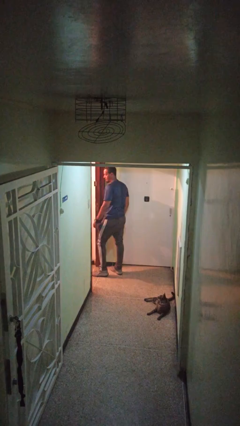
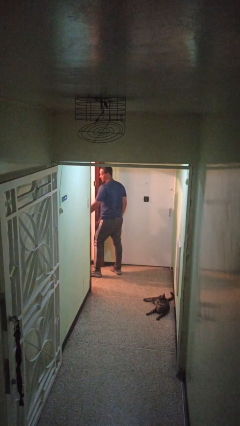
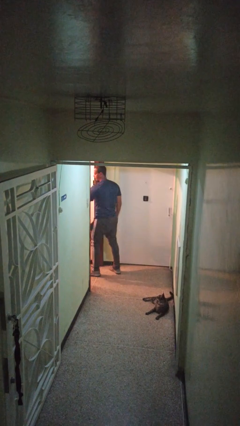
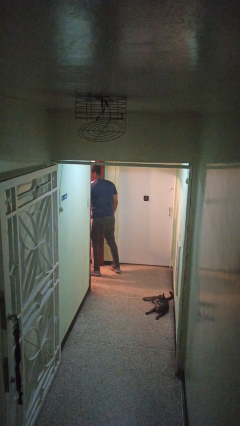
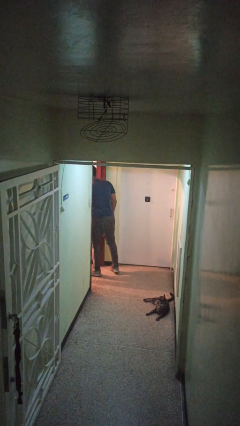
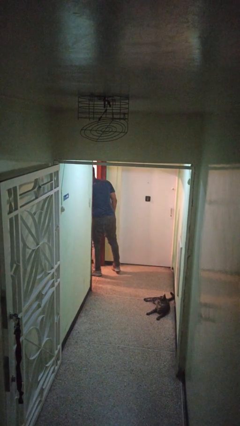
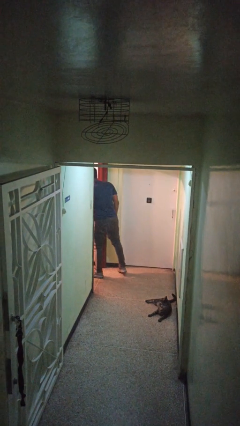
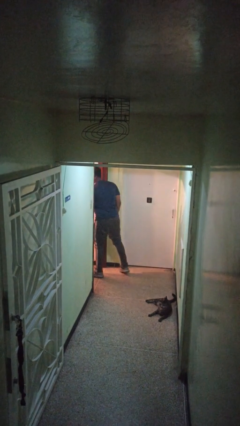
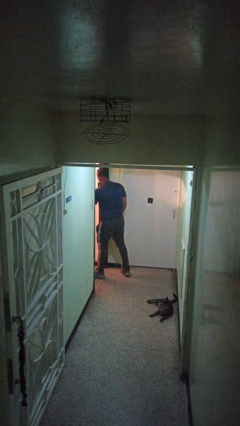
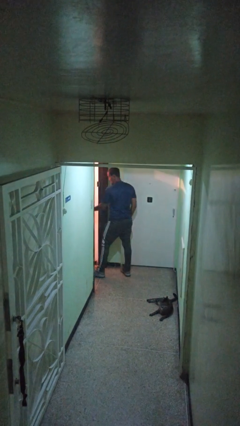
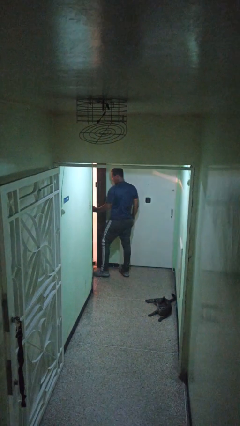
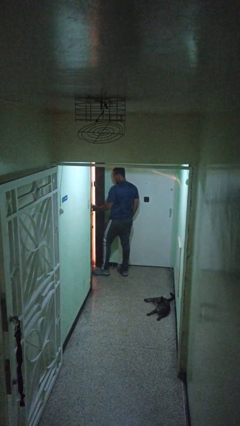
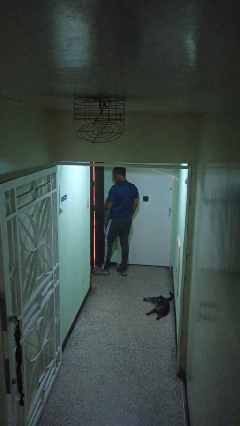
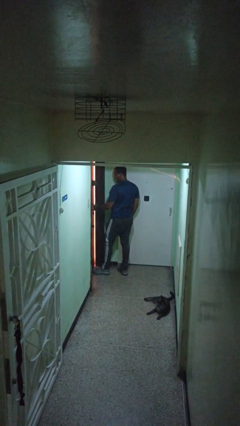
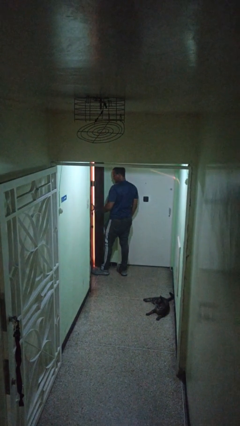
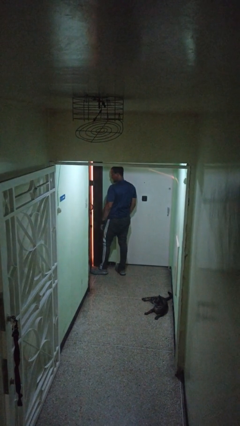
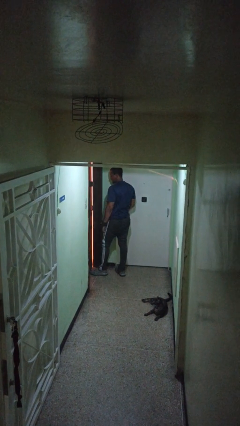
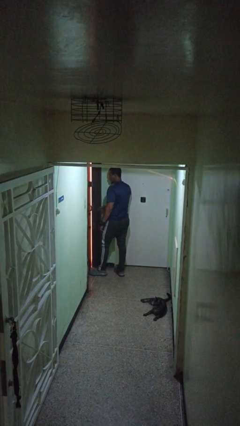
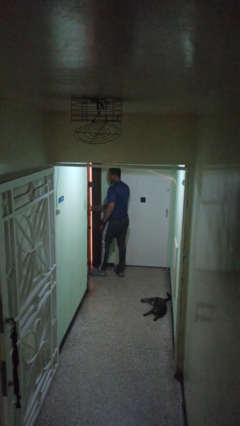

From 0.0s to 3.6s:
person closes facility door

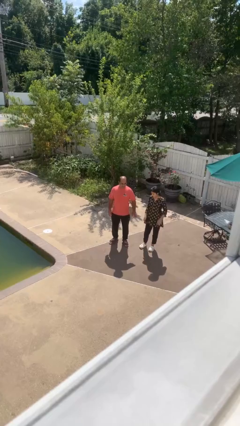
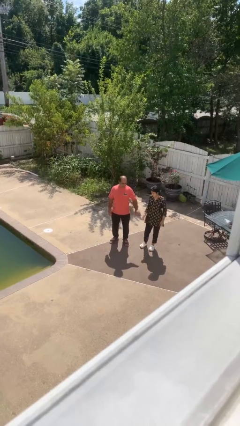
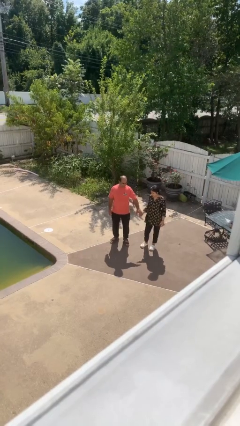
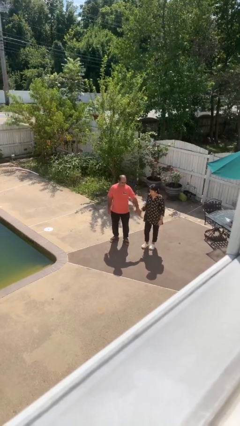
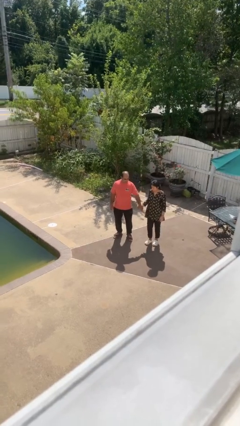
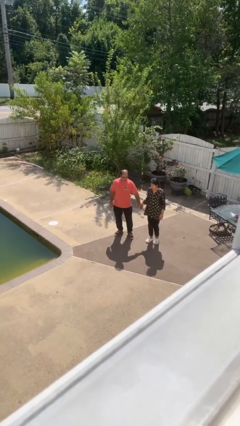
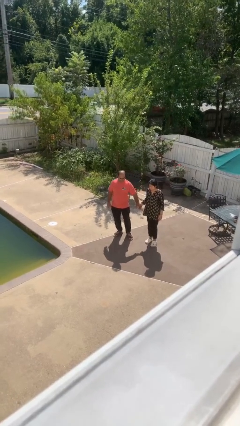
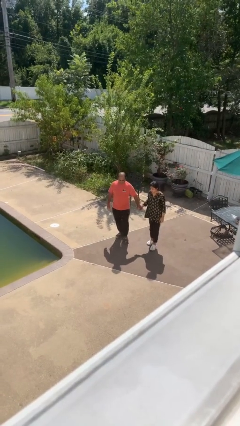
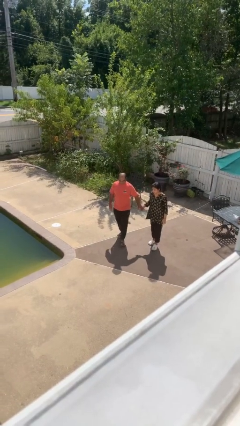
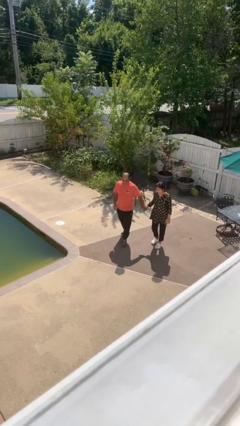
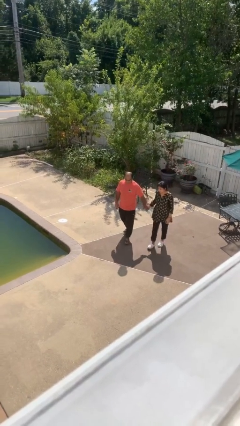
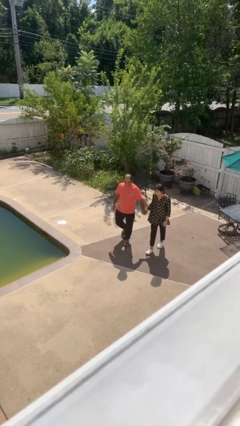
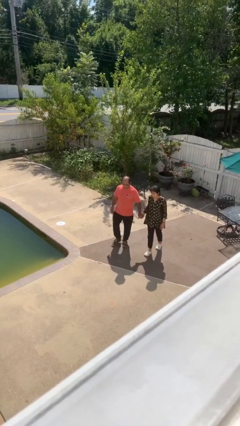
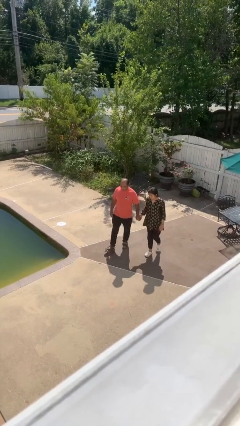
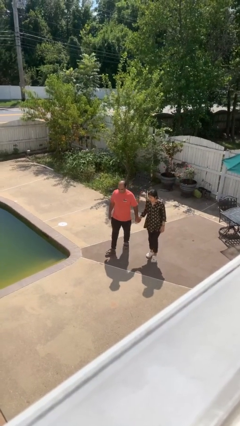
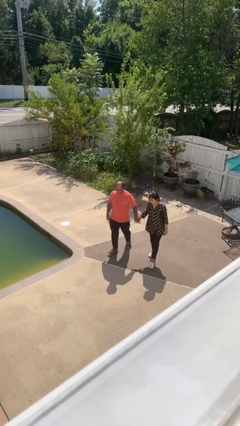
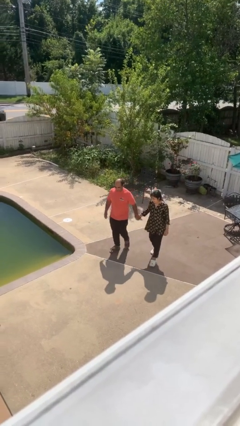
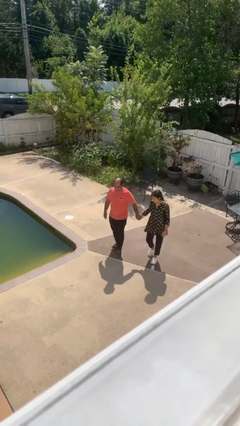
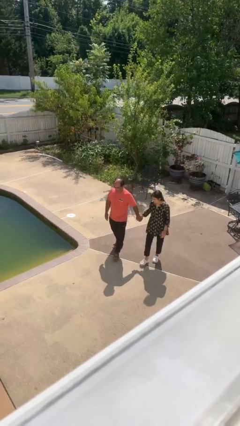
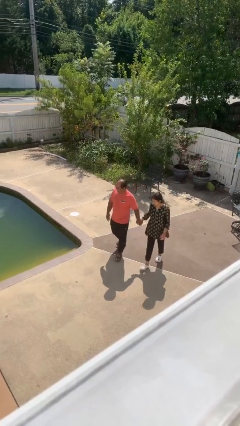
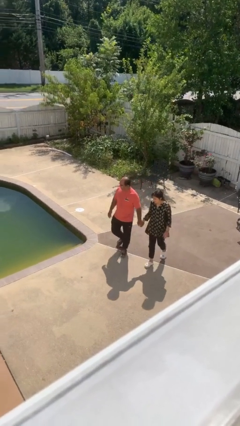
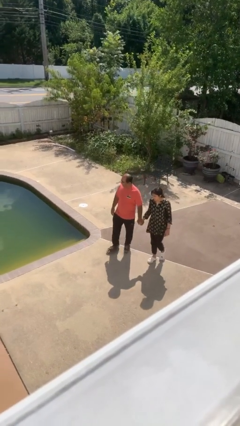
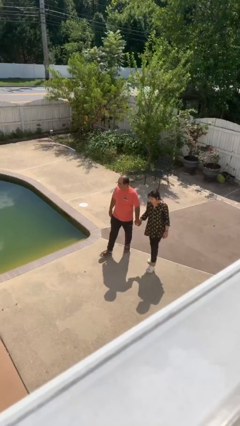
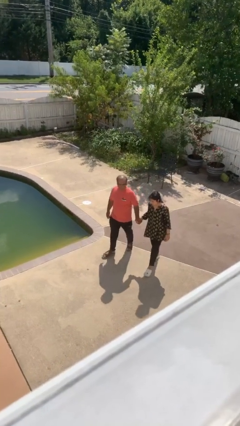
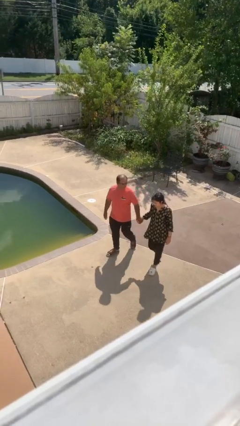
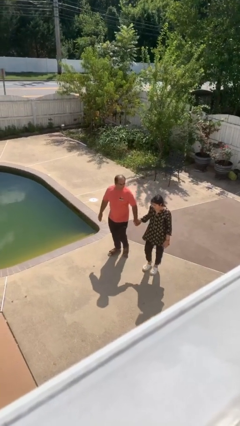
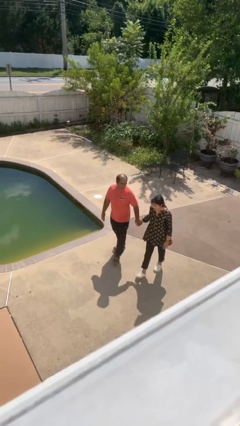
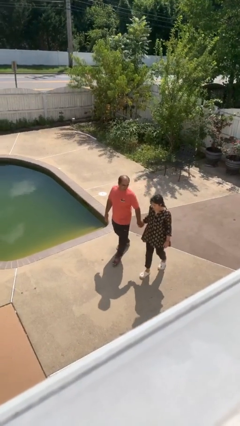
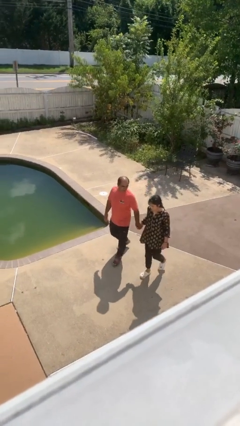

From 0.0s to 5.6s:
person holds hand

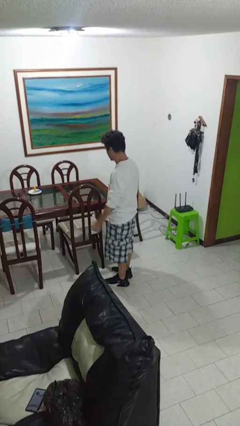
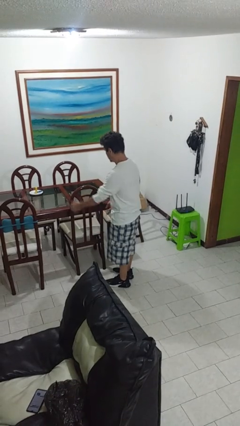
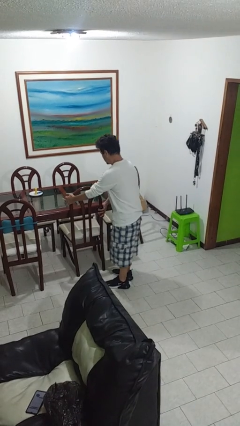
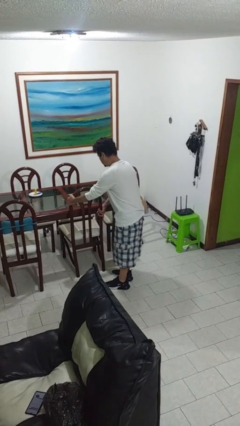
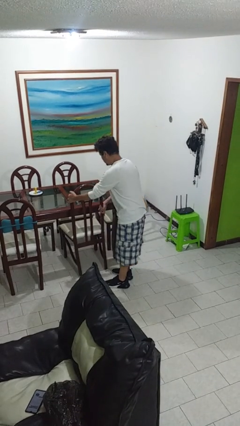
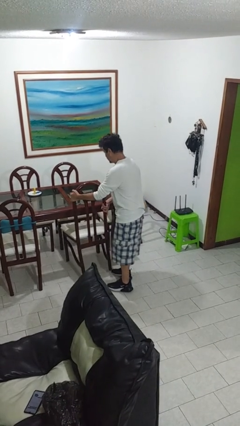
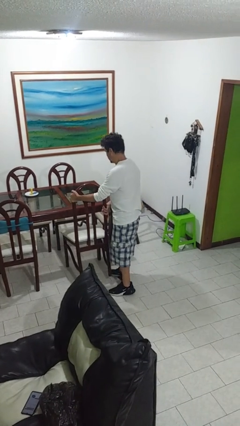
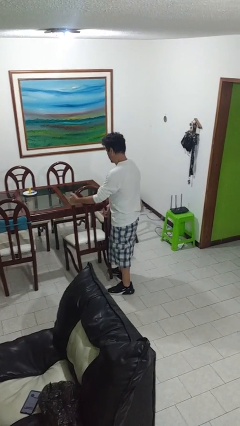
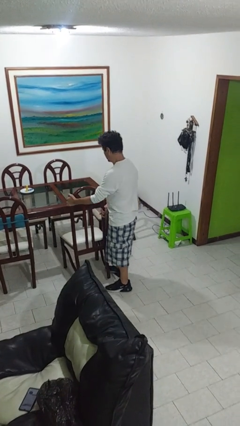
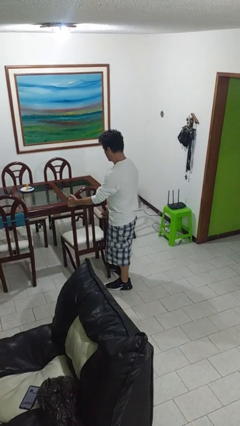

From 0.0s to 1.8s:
person pulls out chair

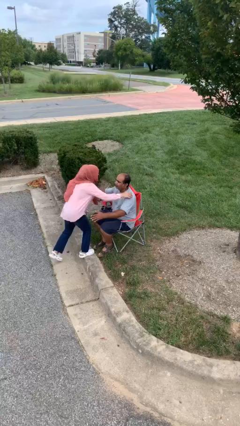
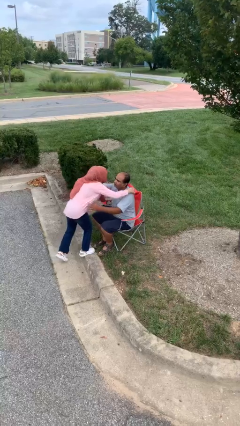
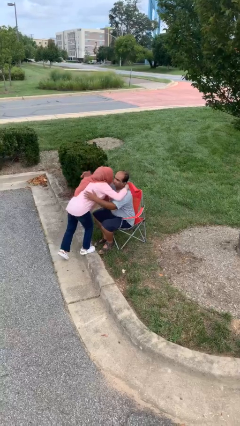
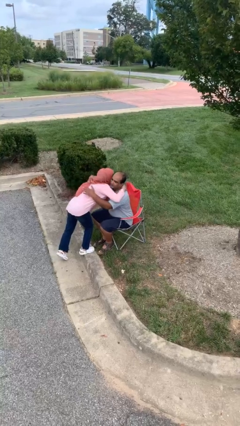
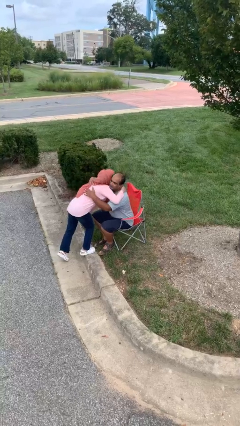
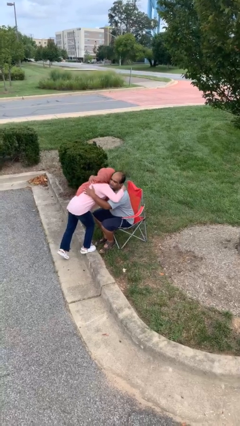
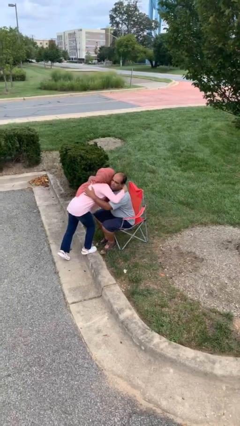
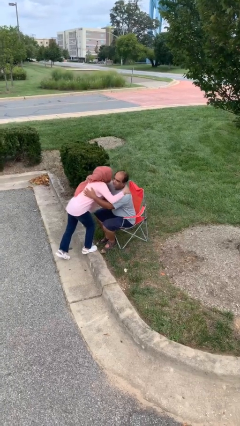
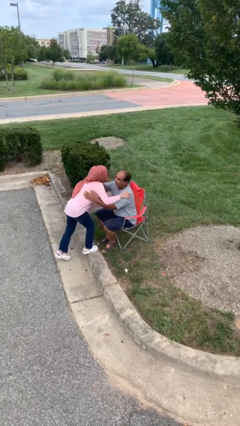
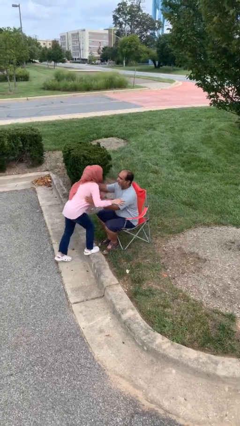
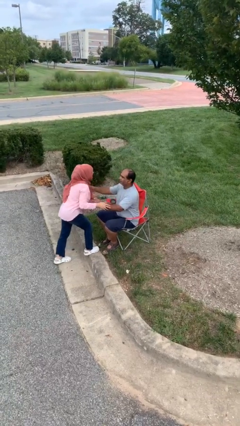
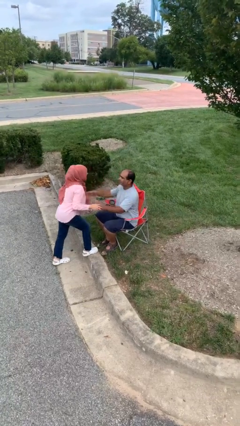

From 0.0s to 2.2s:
person embraces person

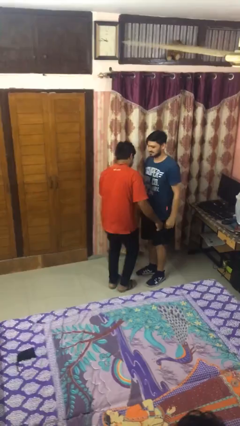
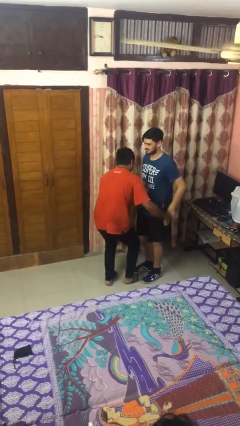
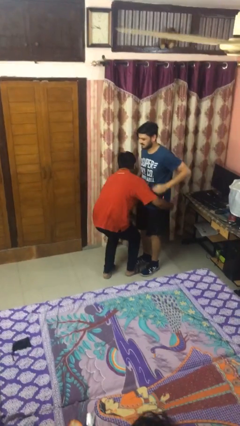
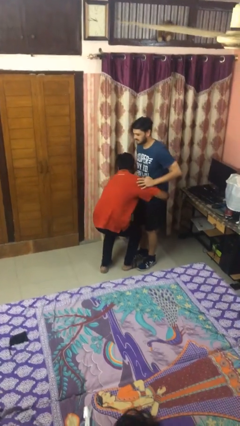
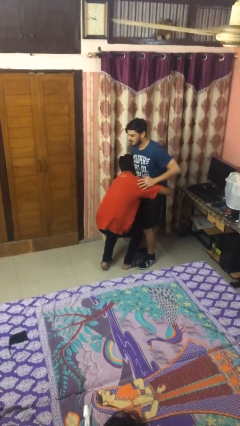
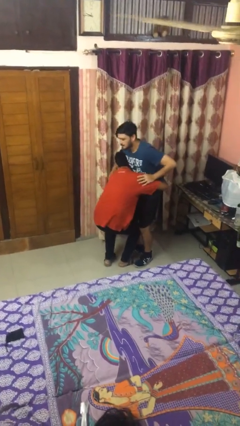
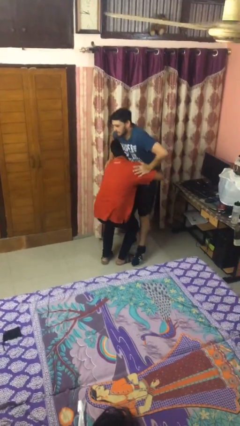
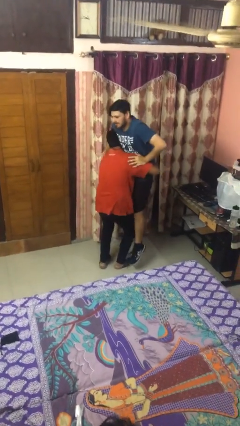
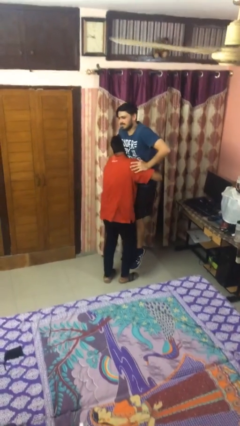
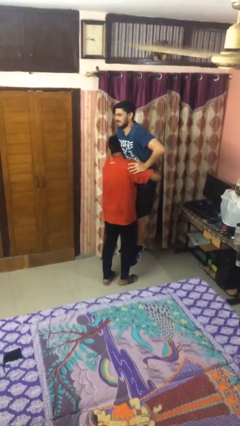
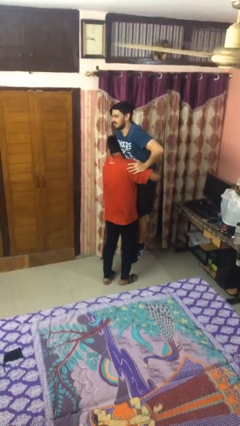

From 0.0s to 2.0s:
person picks up person

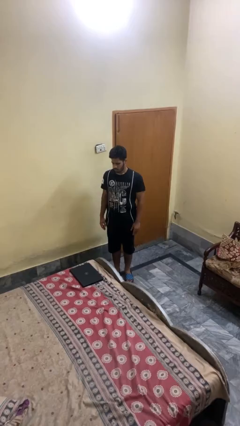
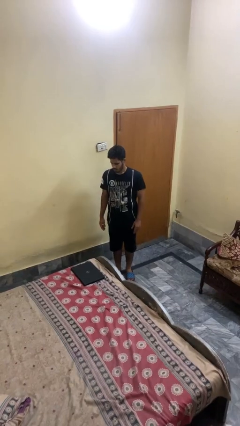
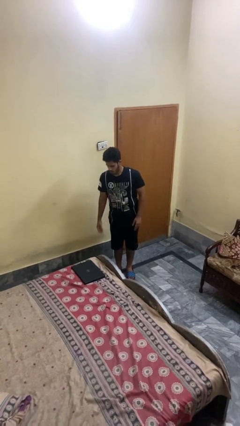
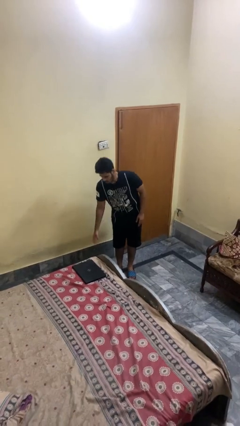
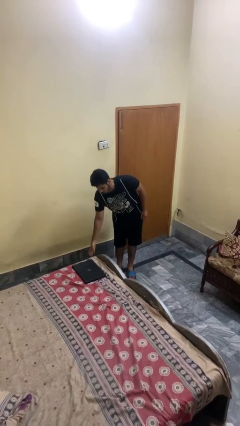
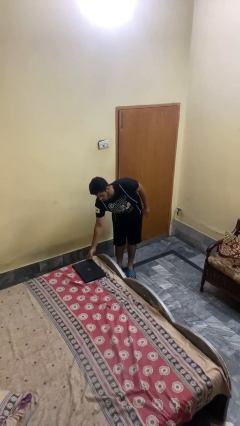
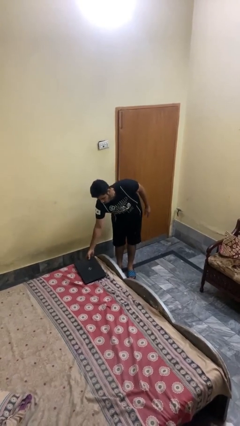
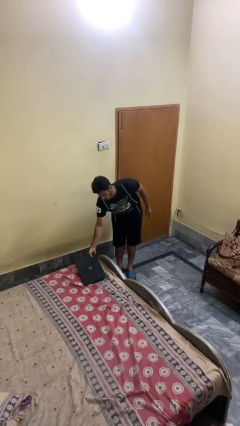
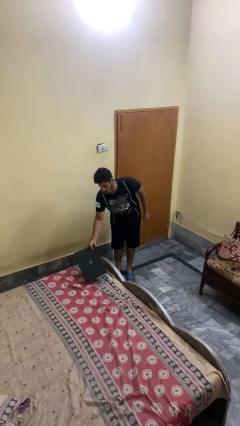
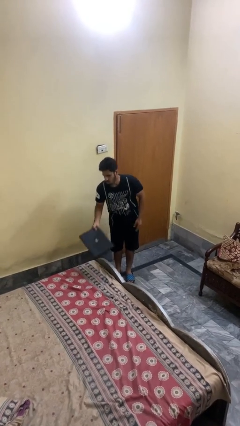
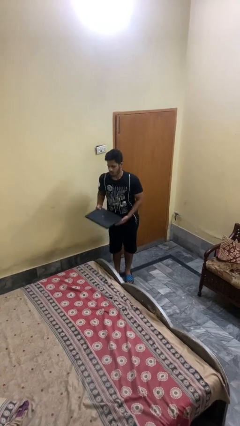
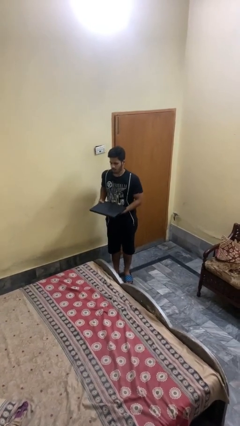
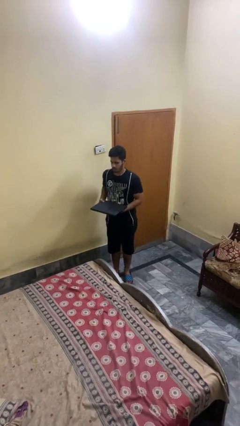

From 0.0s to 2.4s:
person picks up object from bed
